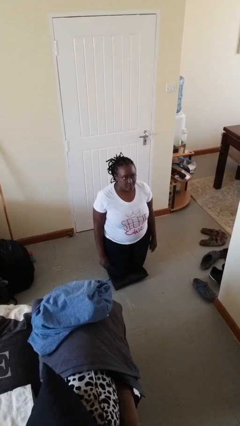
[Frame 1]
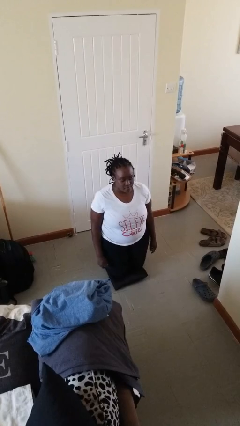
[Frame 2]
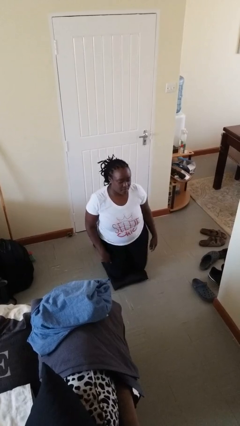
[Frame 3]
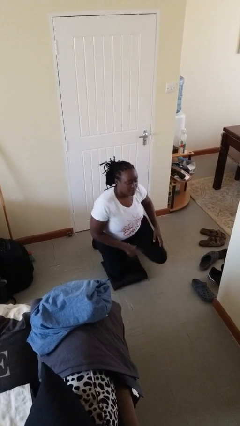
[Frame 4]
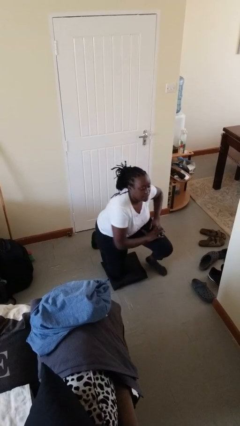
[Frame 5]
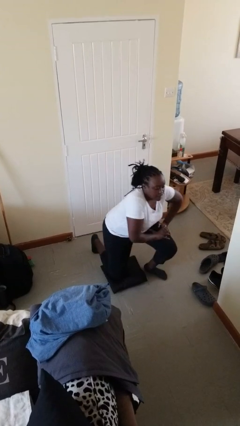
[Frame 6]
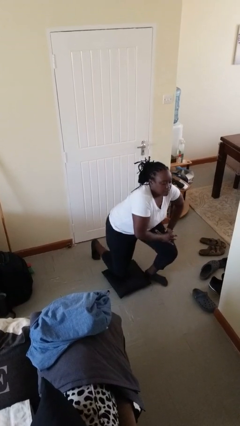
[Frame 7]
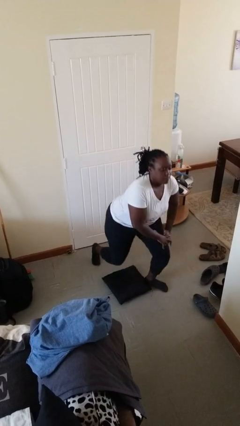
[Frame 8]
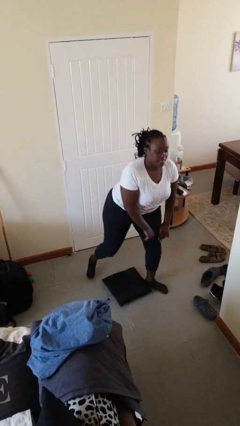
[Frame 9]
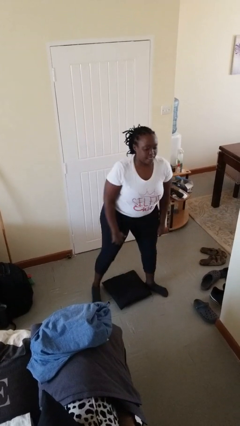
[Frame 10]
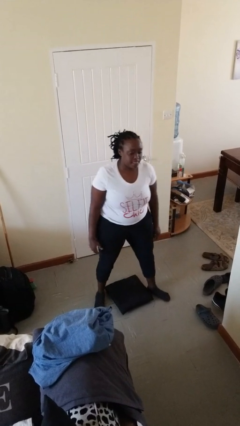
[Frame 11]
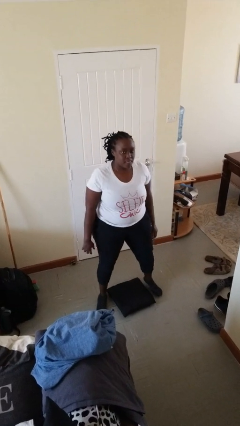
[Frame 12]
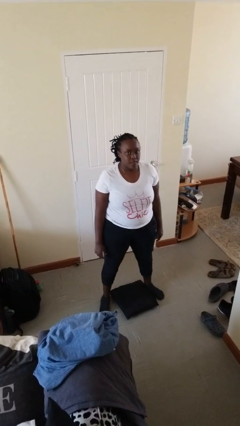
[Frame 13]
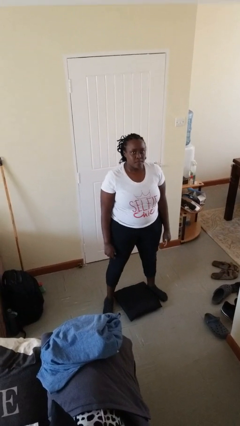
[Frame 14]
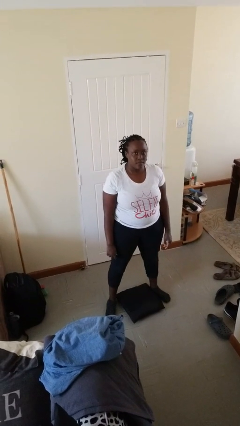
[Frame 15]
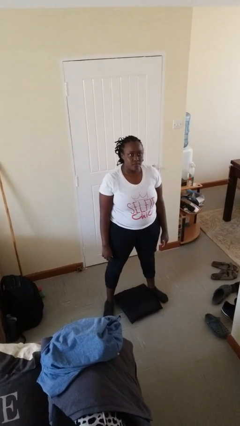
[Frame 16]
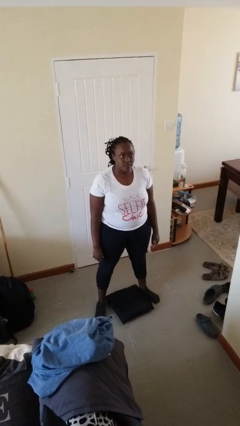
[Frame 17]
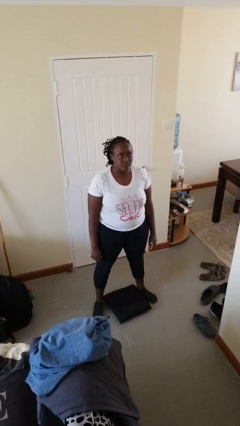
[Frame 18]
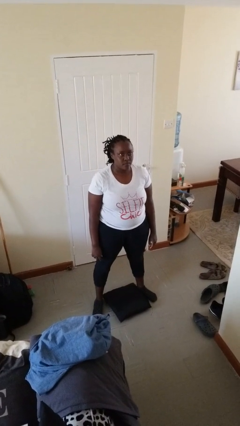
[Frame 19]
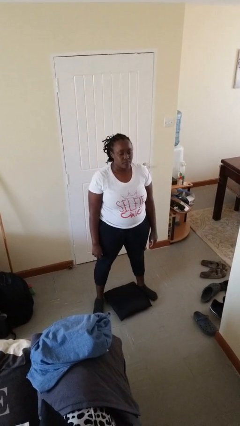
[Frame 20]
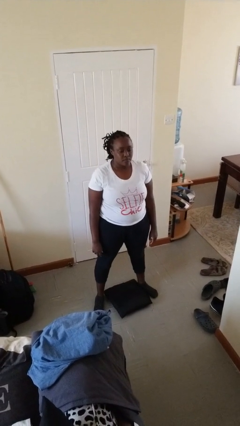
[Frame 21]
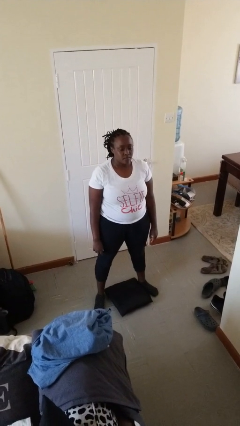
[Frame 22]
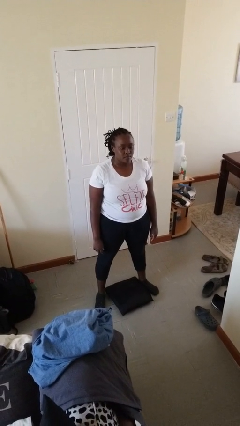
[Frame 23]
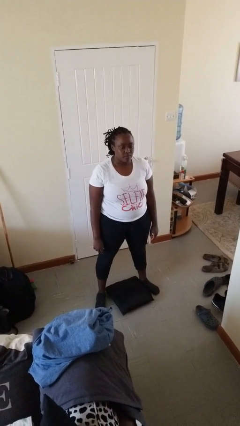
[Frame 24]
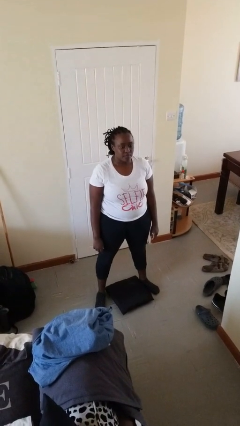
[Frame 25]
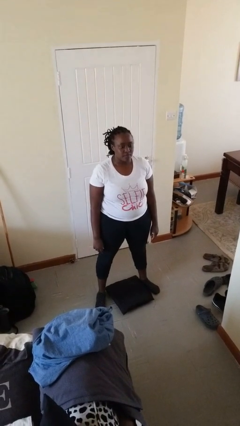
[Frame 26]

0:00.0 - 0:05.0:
person stands up from floor

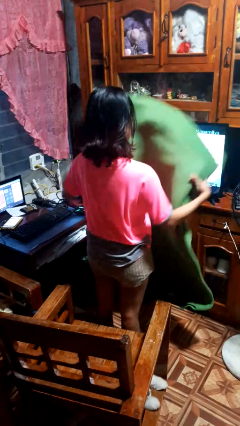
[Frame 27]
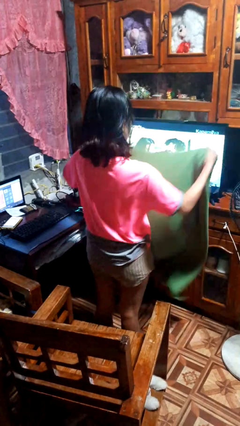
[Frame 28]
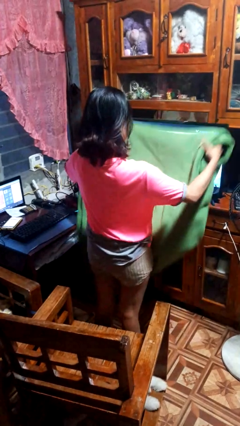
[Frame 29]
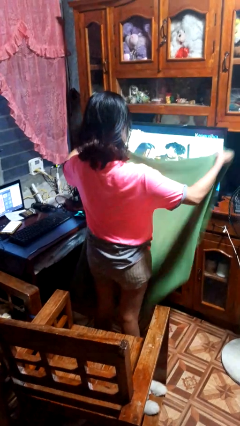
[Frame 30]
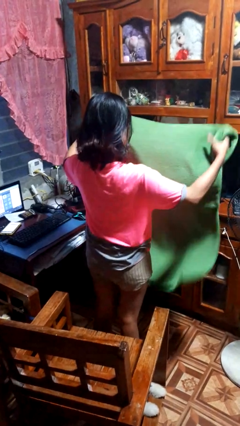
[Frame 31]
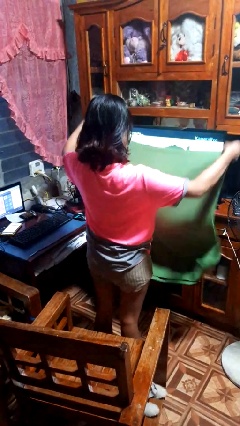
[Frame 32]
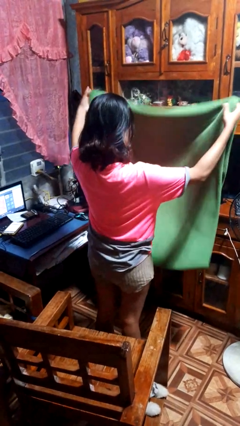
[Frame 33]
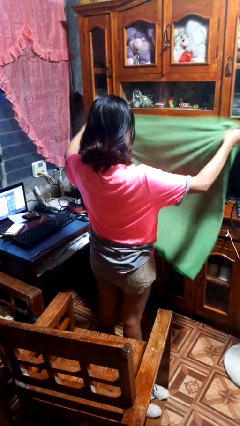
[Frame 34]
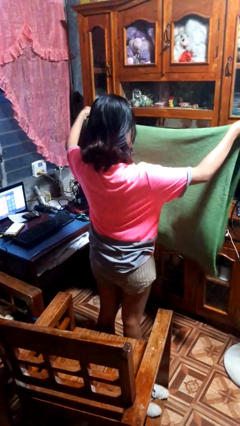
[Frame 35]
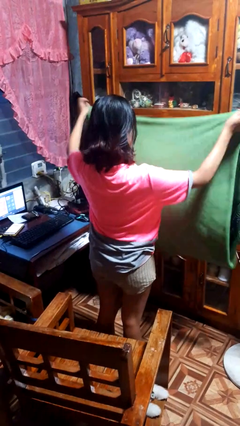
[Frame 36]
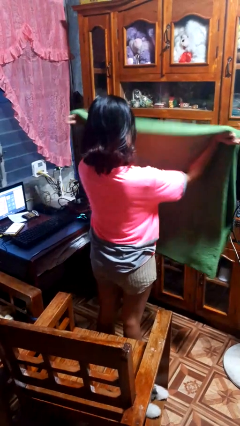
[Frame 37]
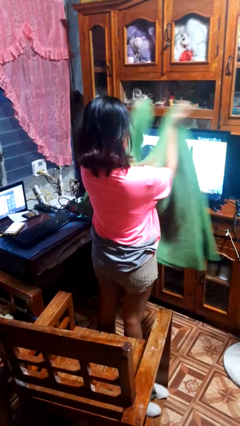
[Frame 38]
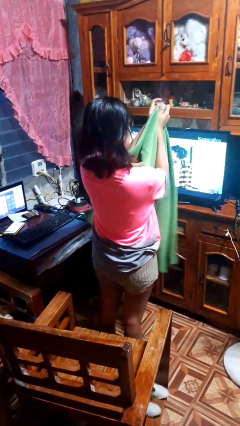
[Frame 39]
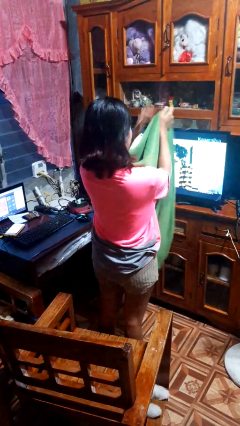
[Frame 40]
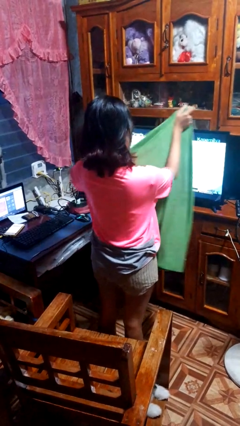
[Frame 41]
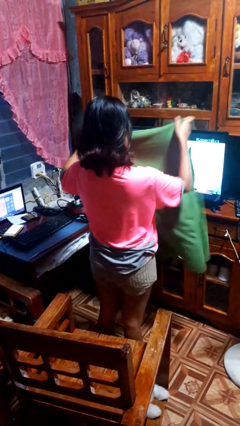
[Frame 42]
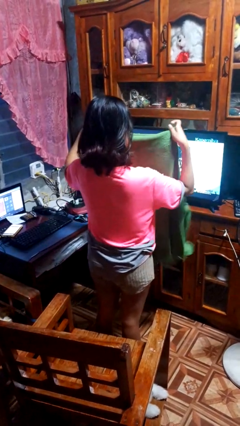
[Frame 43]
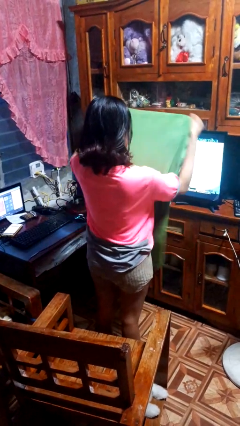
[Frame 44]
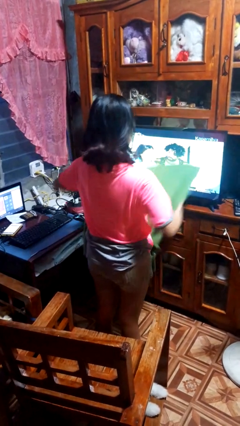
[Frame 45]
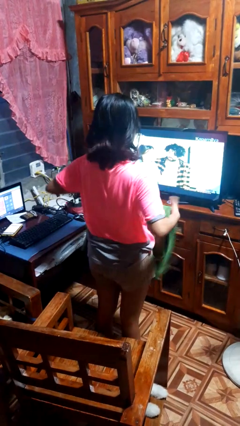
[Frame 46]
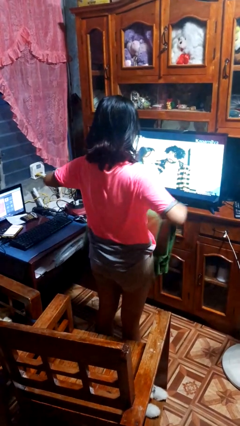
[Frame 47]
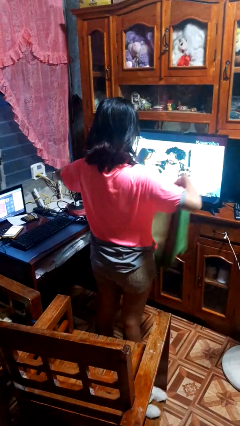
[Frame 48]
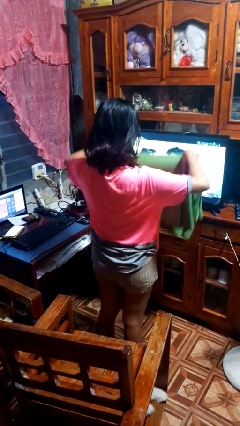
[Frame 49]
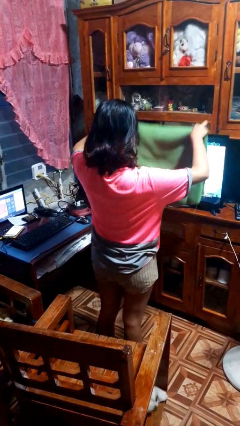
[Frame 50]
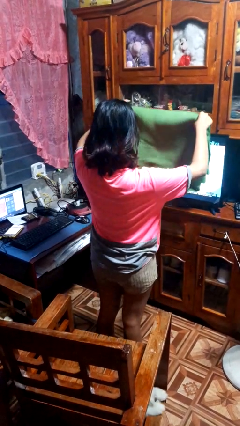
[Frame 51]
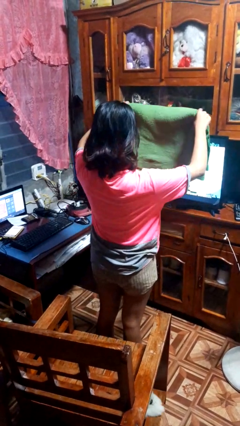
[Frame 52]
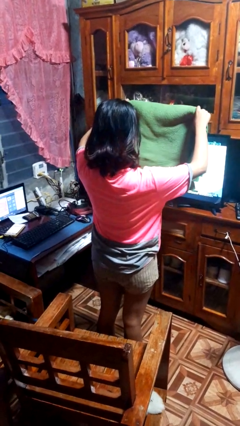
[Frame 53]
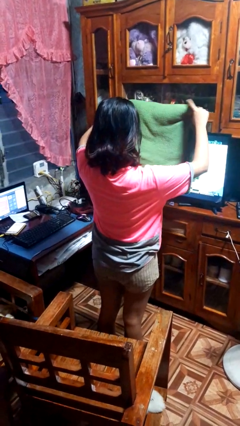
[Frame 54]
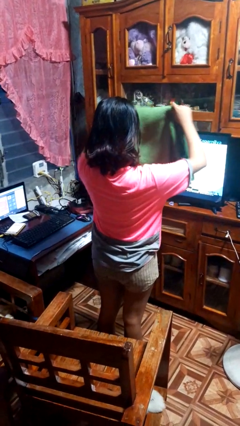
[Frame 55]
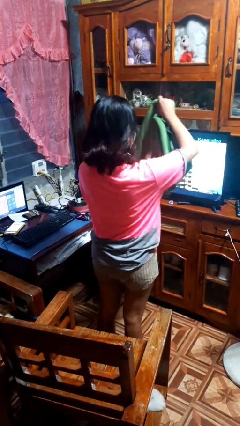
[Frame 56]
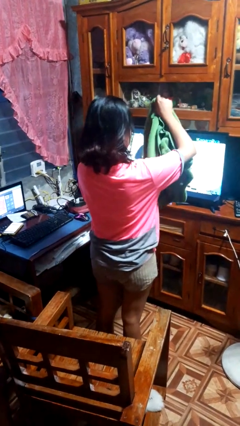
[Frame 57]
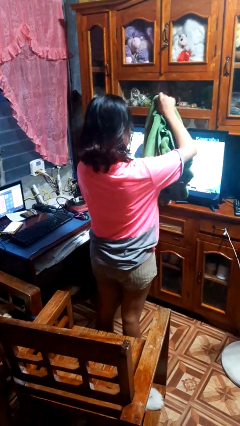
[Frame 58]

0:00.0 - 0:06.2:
person folds blanket

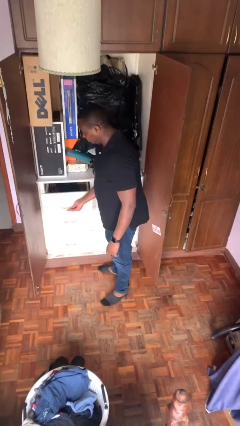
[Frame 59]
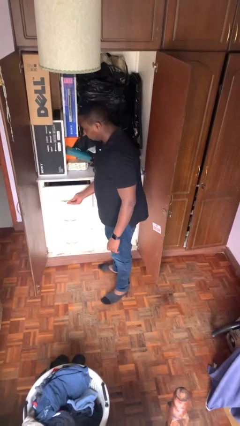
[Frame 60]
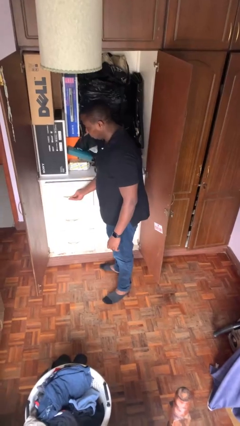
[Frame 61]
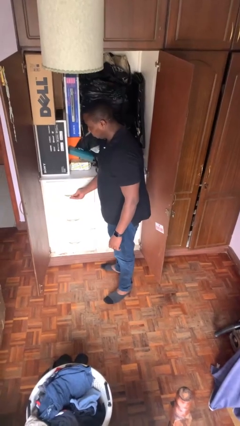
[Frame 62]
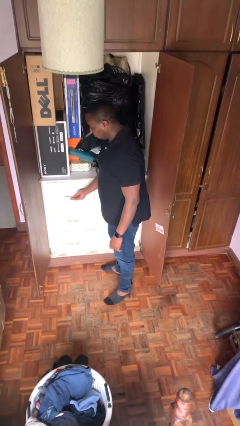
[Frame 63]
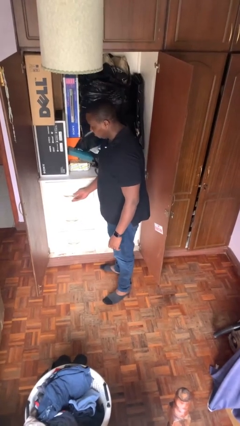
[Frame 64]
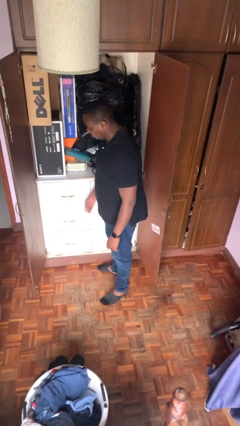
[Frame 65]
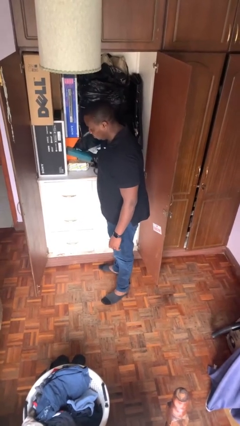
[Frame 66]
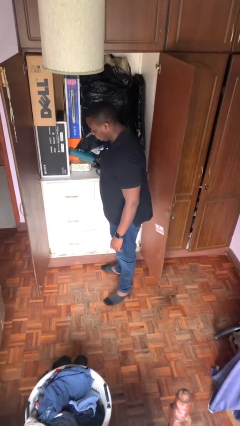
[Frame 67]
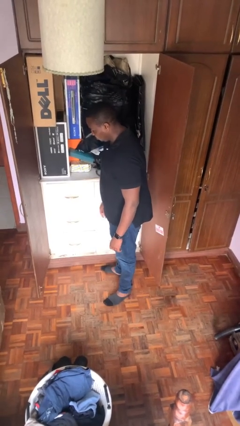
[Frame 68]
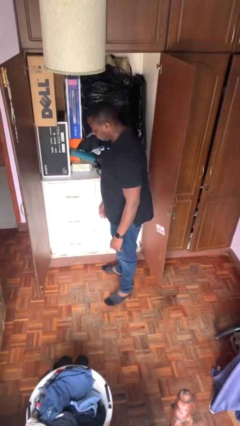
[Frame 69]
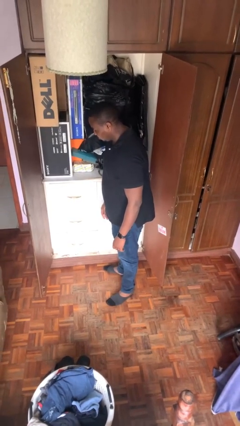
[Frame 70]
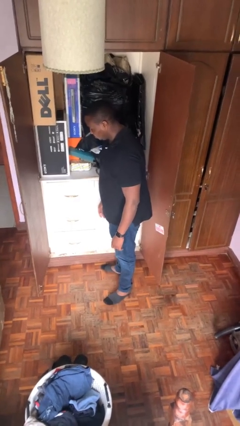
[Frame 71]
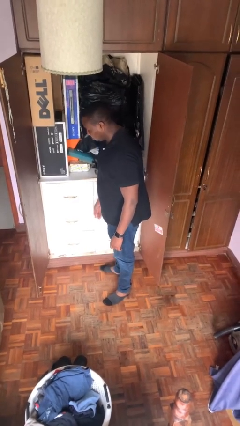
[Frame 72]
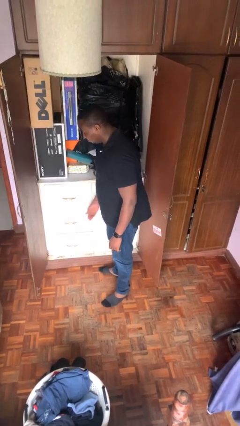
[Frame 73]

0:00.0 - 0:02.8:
person closes dresser drawer

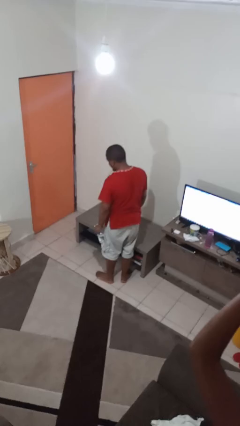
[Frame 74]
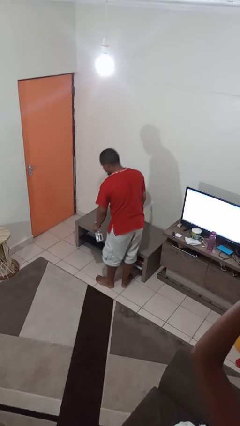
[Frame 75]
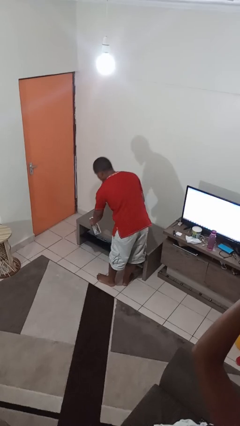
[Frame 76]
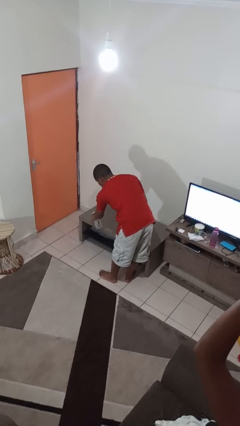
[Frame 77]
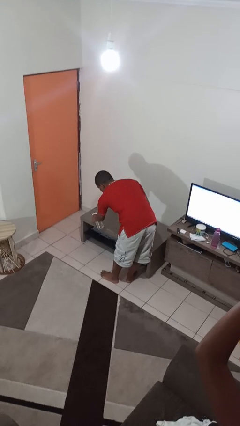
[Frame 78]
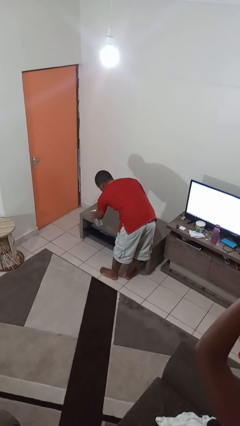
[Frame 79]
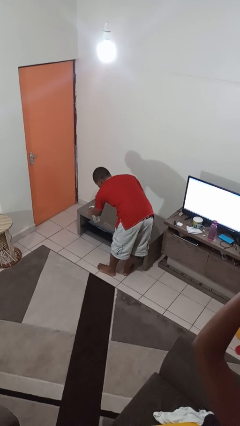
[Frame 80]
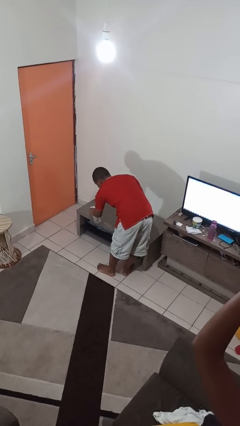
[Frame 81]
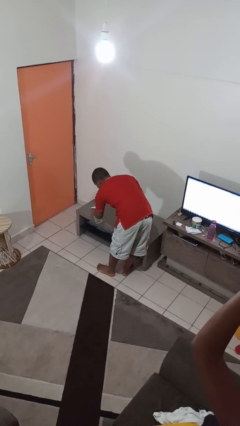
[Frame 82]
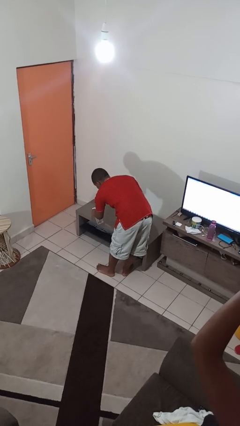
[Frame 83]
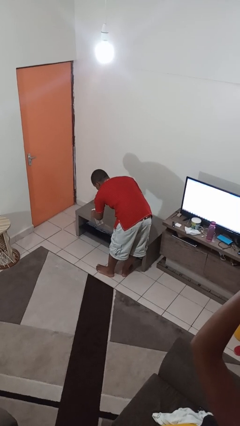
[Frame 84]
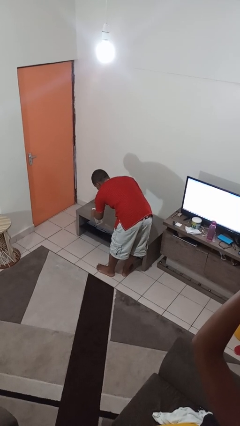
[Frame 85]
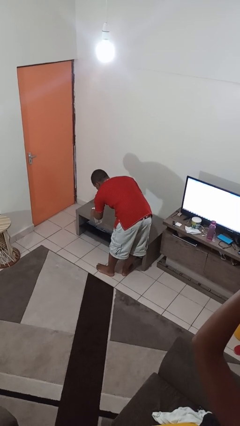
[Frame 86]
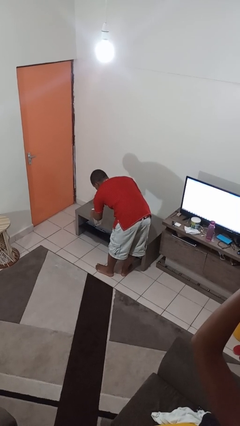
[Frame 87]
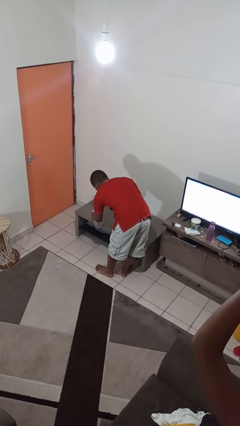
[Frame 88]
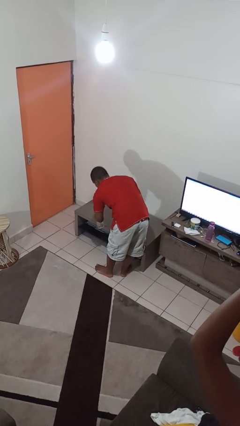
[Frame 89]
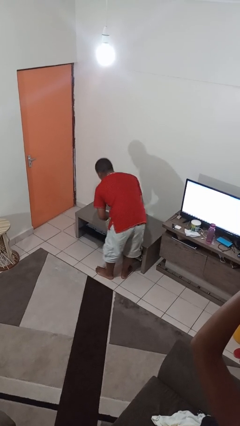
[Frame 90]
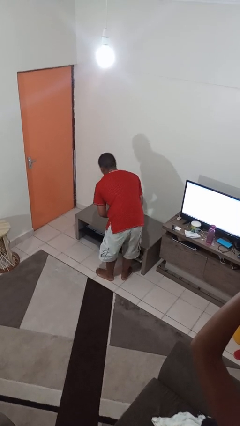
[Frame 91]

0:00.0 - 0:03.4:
person sprays from bottle

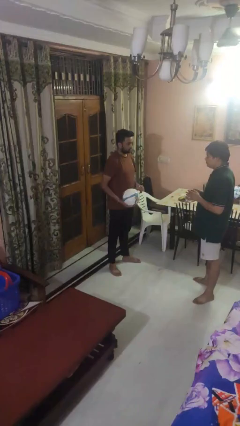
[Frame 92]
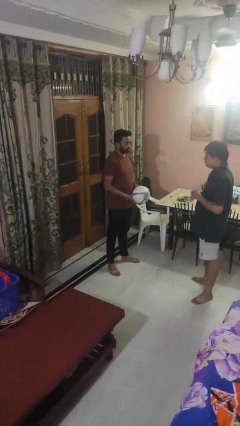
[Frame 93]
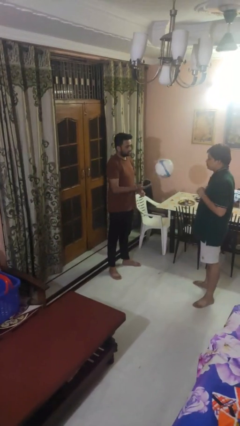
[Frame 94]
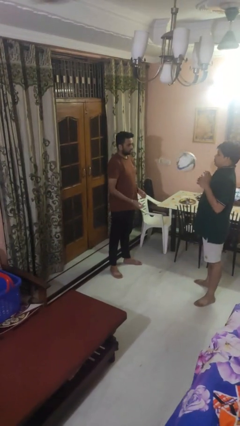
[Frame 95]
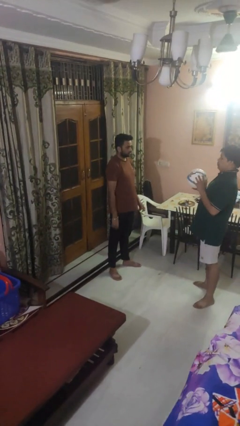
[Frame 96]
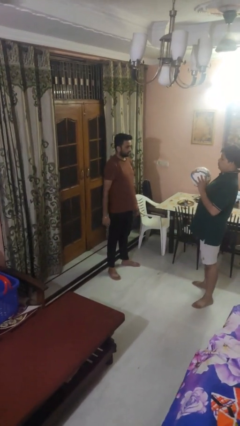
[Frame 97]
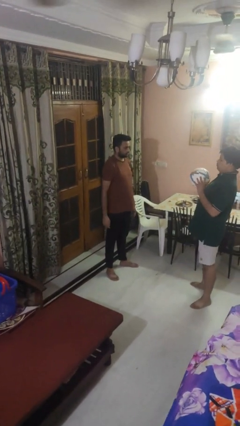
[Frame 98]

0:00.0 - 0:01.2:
person throws object to person
